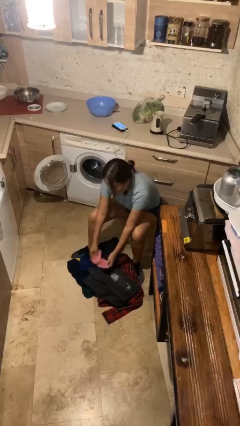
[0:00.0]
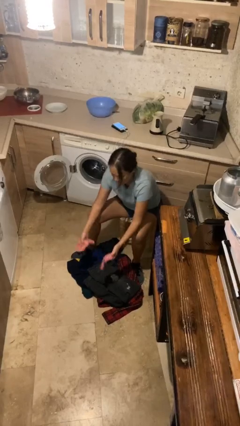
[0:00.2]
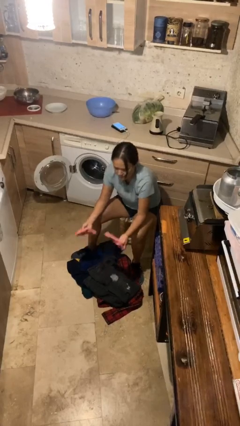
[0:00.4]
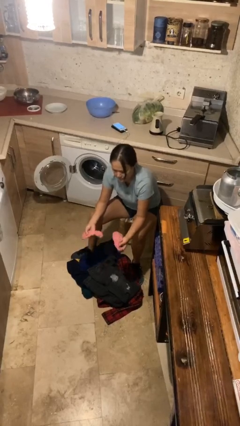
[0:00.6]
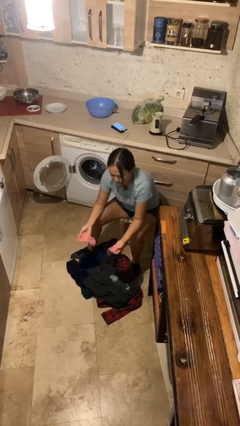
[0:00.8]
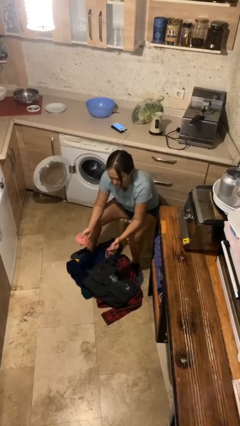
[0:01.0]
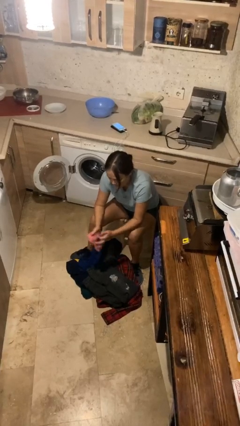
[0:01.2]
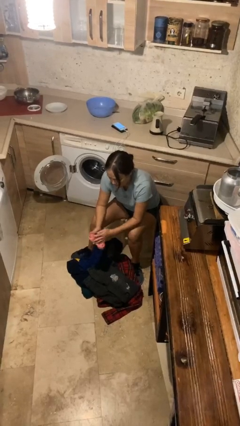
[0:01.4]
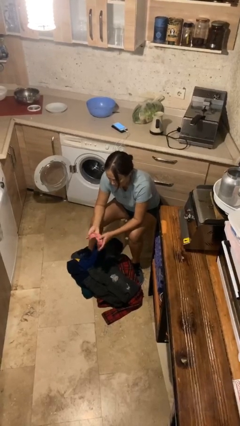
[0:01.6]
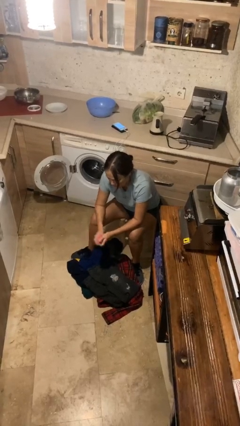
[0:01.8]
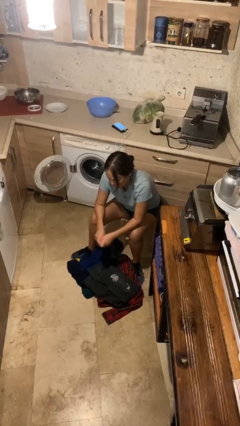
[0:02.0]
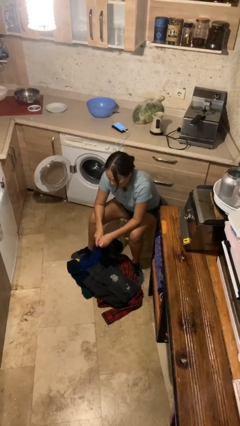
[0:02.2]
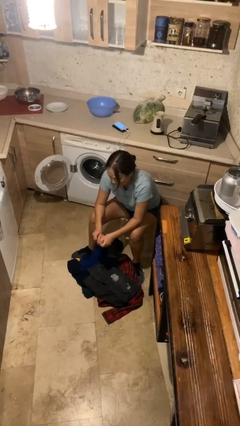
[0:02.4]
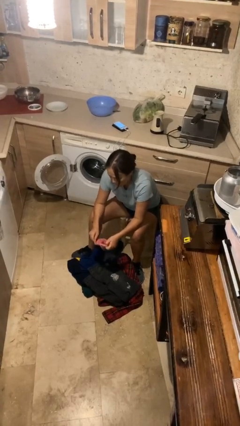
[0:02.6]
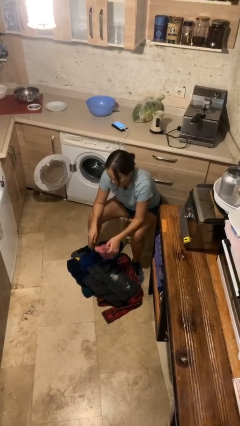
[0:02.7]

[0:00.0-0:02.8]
person folds socks

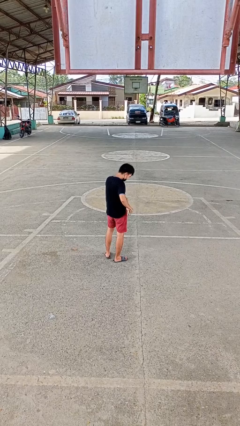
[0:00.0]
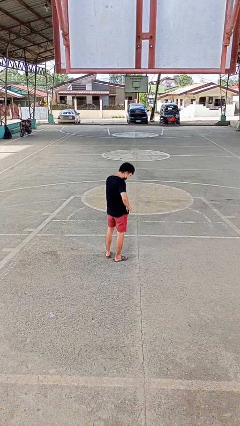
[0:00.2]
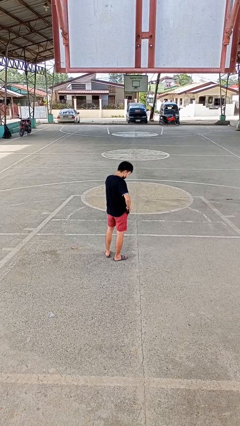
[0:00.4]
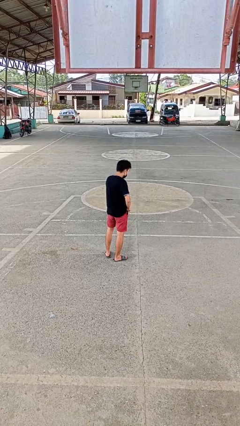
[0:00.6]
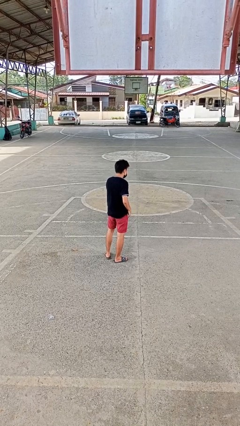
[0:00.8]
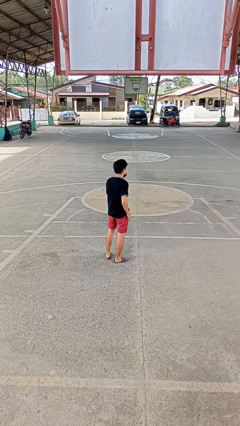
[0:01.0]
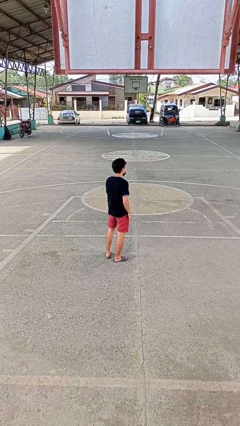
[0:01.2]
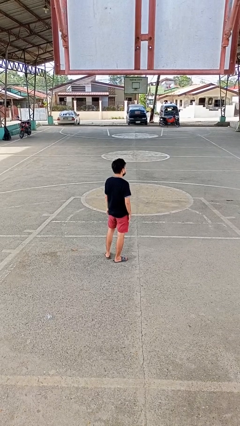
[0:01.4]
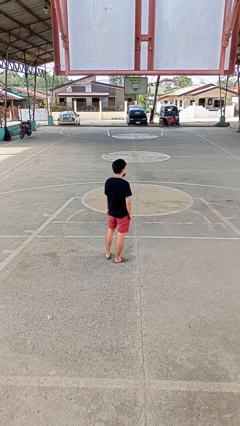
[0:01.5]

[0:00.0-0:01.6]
person puts phone into pocket

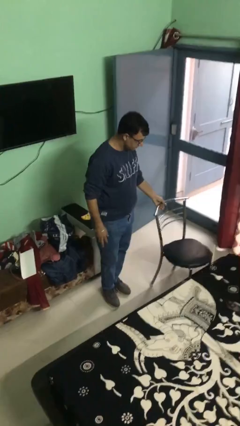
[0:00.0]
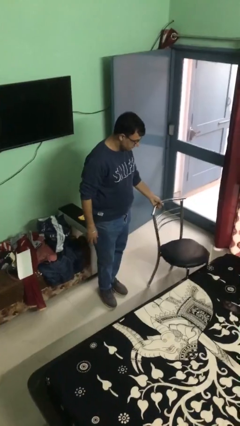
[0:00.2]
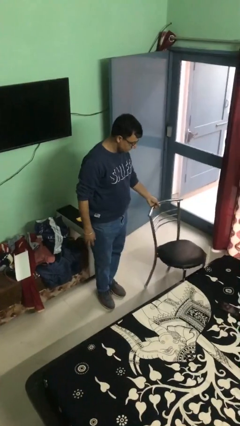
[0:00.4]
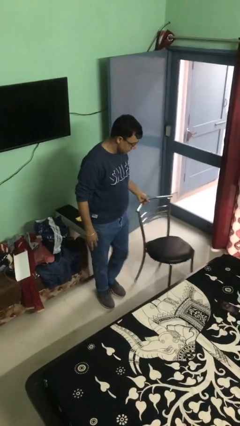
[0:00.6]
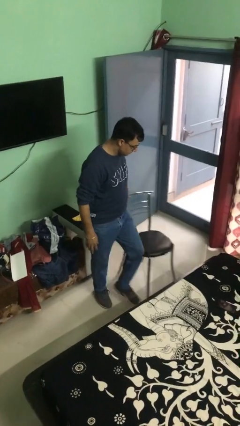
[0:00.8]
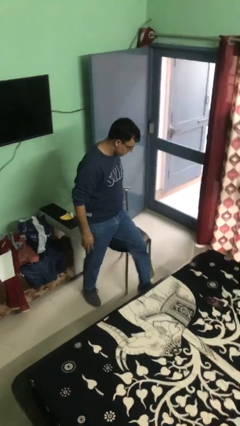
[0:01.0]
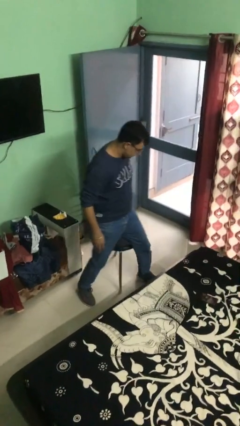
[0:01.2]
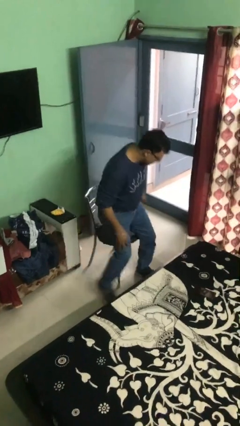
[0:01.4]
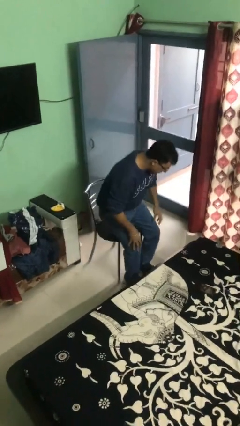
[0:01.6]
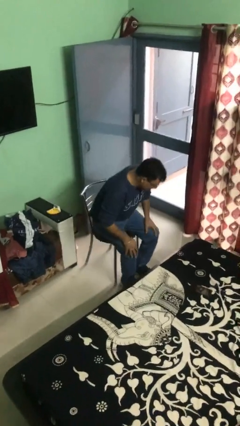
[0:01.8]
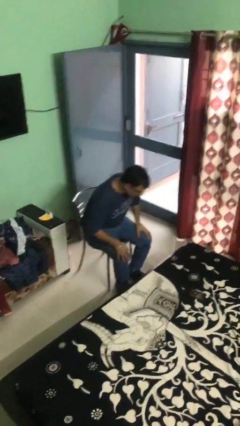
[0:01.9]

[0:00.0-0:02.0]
person sits down

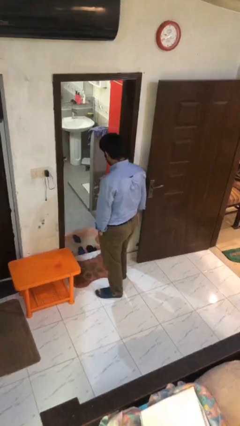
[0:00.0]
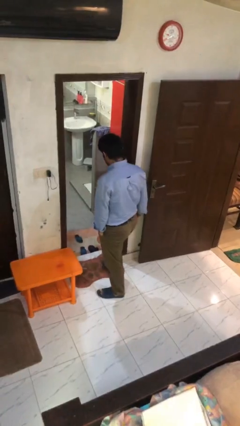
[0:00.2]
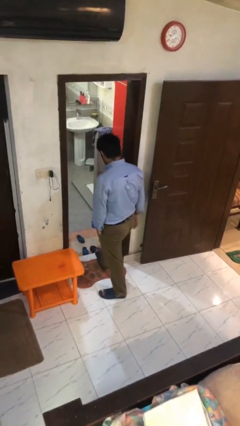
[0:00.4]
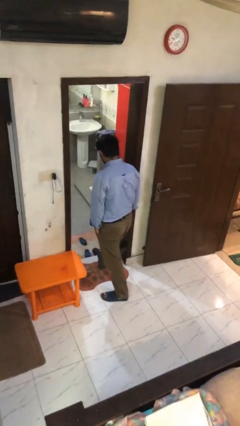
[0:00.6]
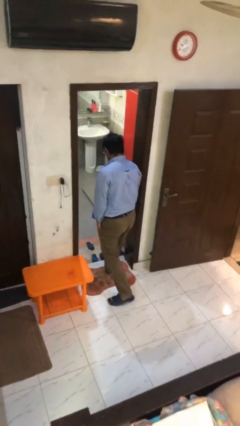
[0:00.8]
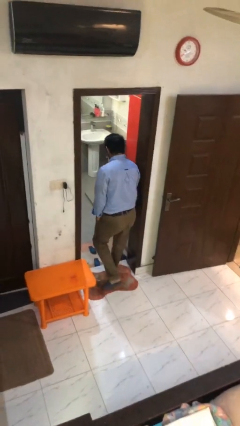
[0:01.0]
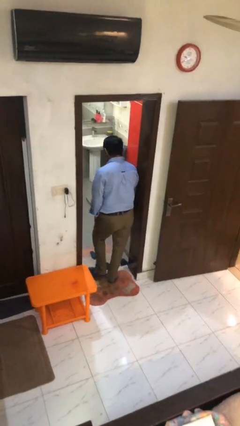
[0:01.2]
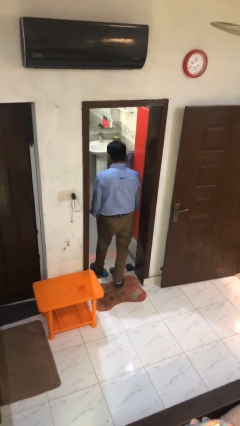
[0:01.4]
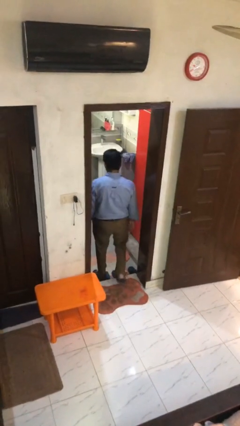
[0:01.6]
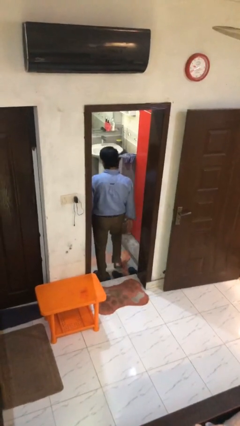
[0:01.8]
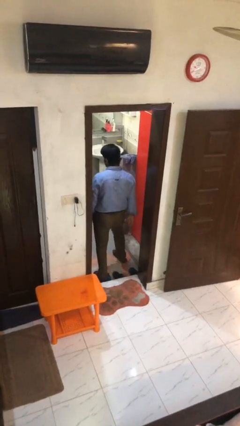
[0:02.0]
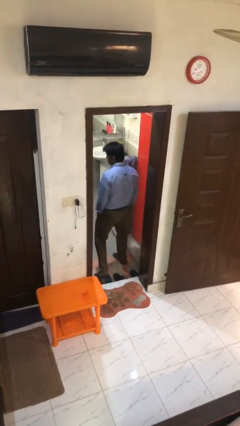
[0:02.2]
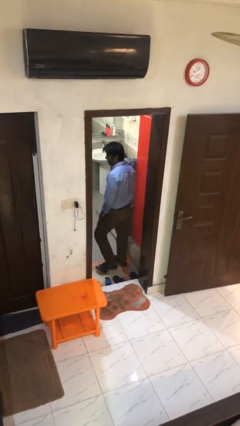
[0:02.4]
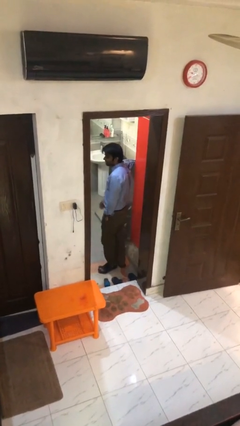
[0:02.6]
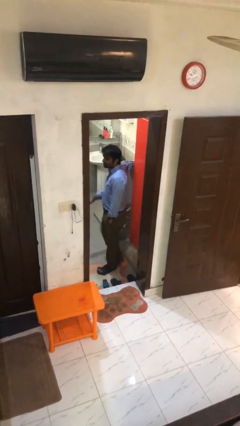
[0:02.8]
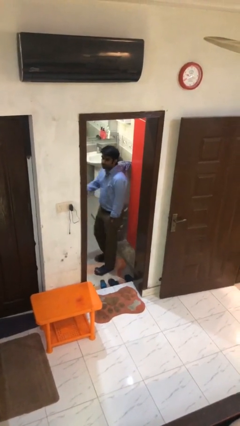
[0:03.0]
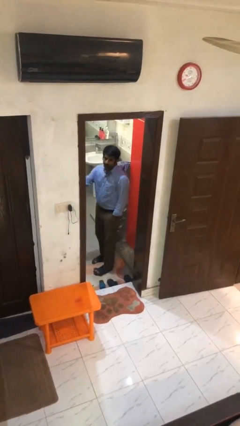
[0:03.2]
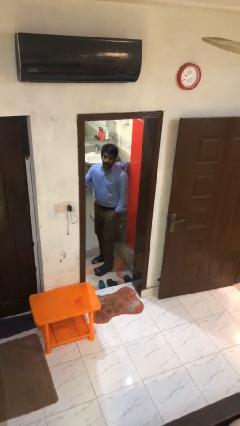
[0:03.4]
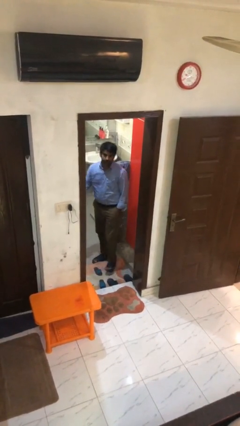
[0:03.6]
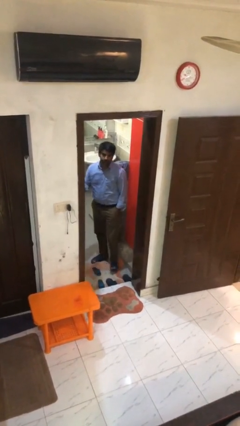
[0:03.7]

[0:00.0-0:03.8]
person exits scene through structure

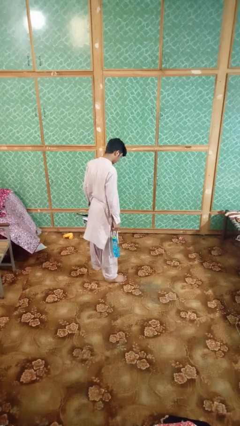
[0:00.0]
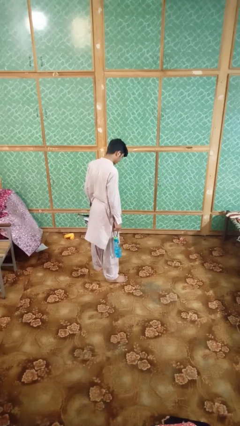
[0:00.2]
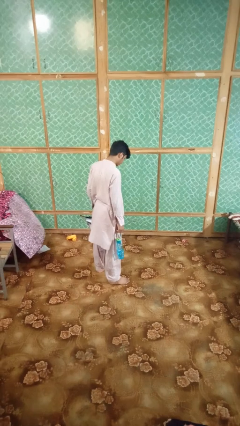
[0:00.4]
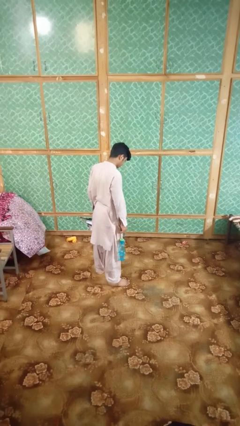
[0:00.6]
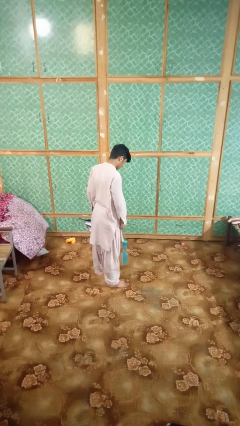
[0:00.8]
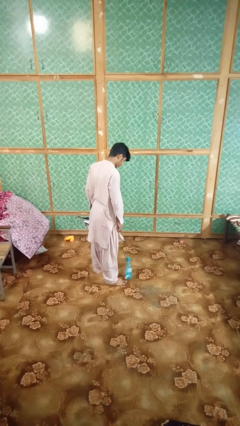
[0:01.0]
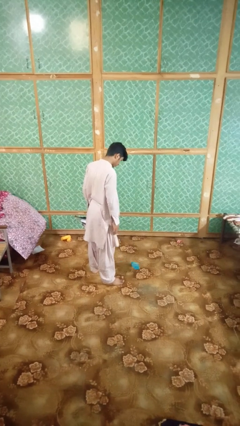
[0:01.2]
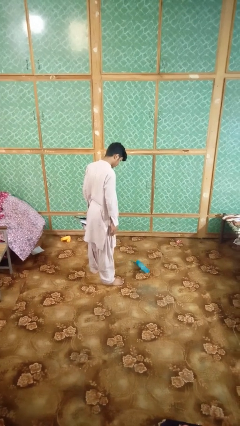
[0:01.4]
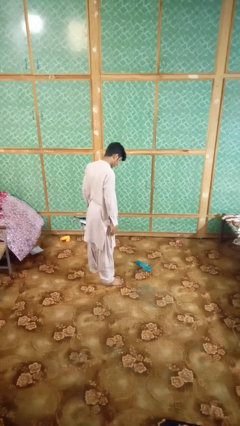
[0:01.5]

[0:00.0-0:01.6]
person drops object

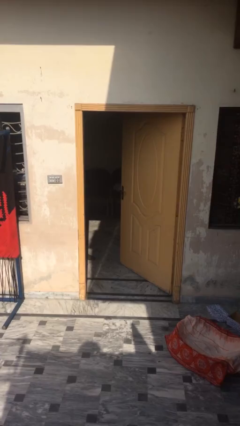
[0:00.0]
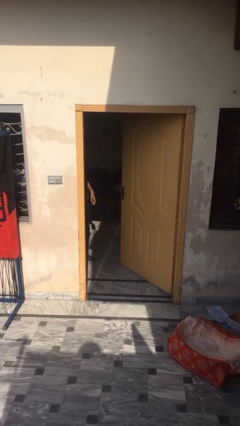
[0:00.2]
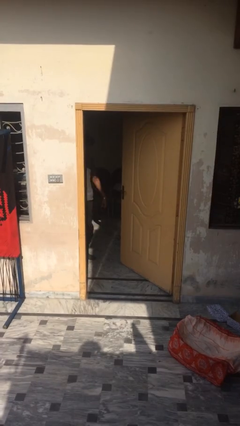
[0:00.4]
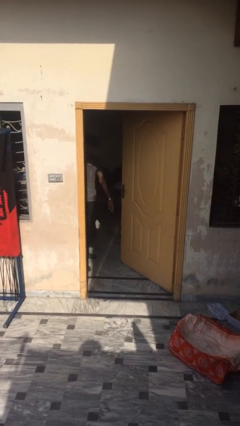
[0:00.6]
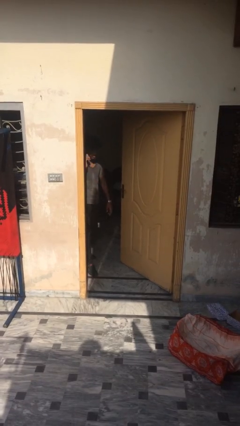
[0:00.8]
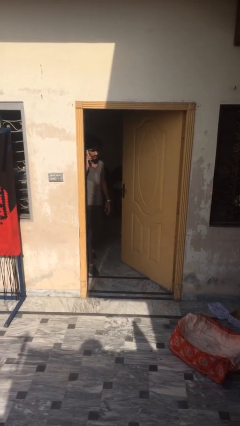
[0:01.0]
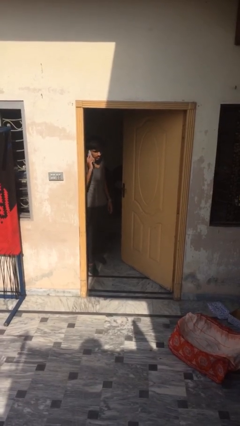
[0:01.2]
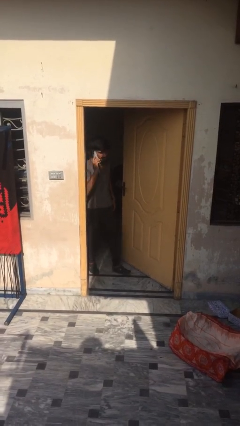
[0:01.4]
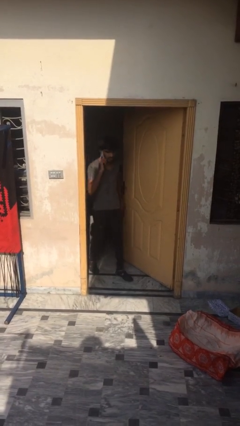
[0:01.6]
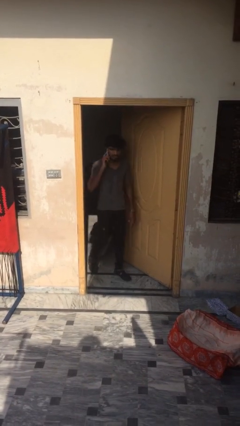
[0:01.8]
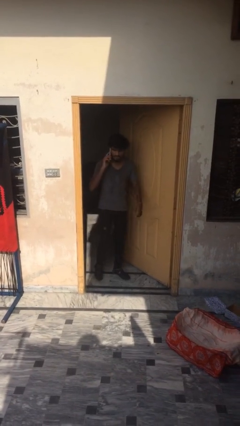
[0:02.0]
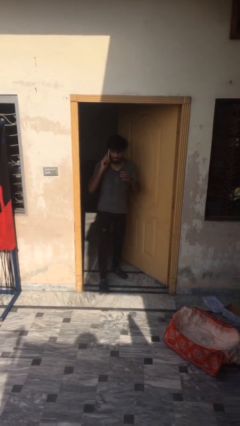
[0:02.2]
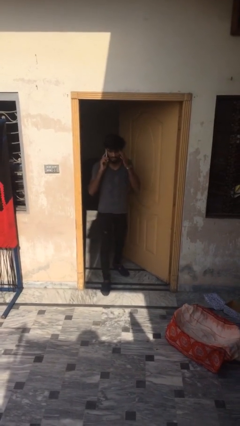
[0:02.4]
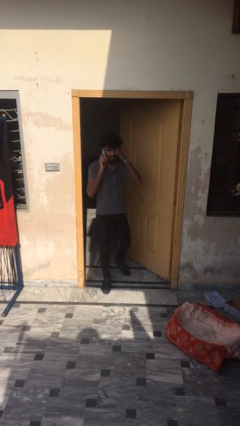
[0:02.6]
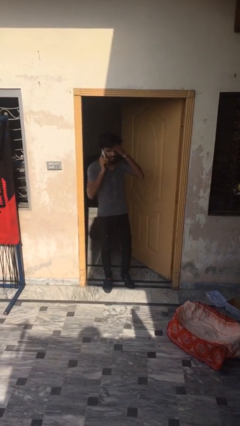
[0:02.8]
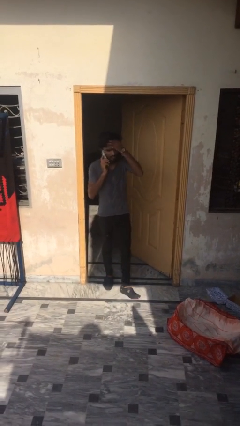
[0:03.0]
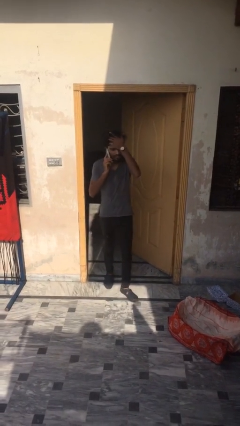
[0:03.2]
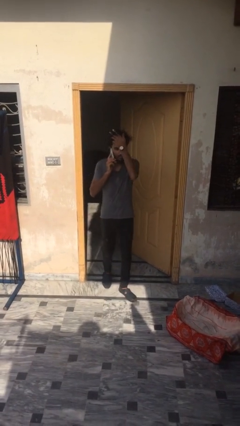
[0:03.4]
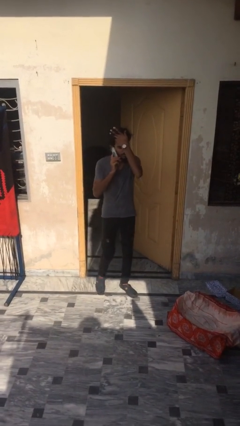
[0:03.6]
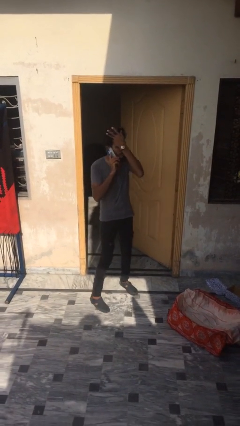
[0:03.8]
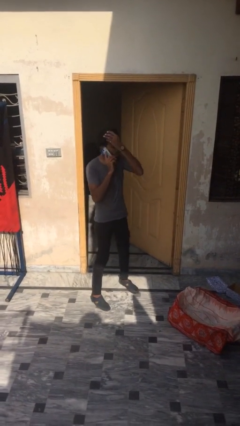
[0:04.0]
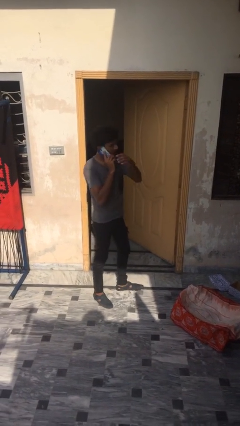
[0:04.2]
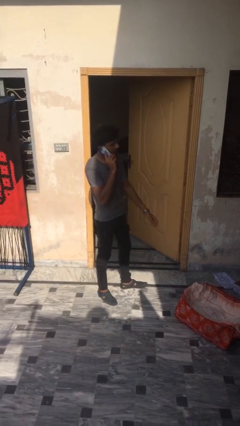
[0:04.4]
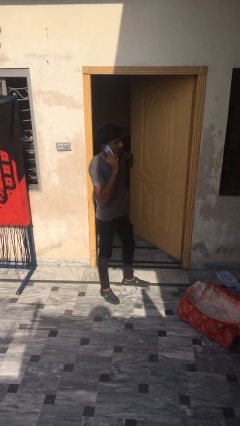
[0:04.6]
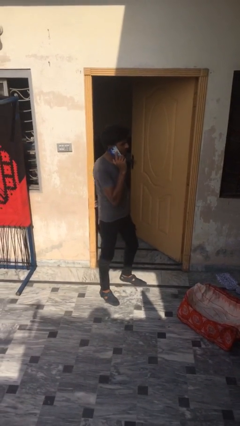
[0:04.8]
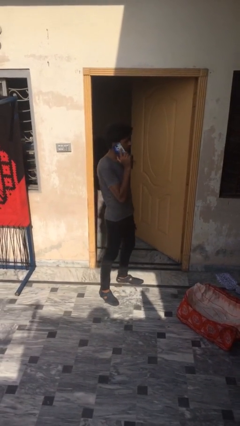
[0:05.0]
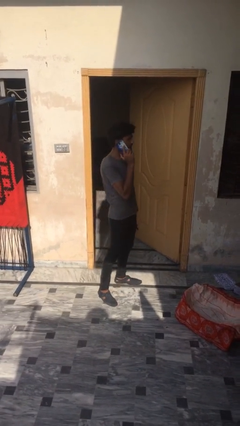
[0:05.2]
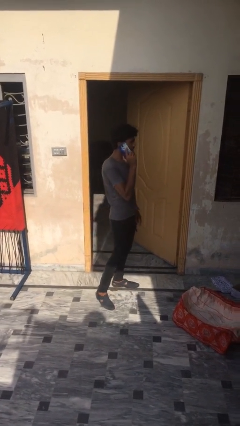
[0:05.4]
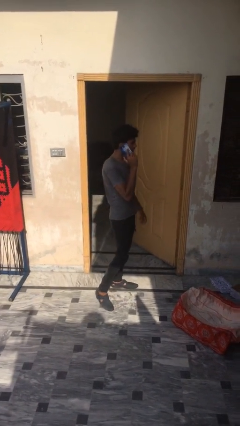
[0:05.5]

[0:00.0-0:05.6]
person enters scene through structure
